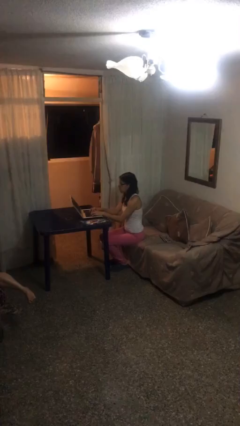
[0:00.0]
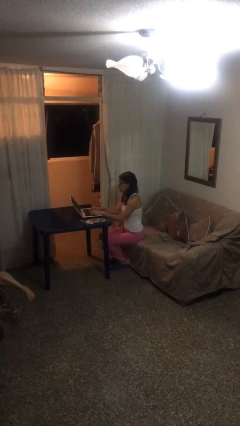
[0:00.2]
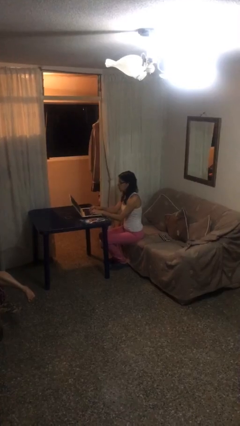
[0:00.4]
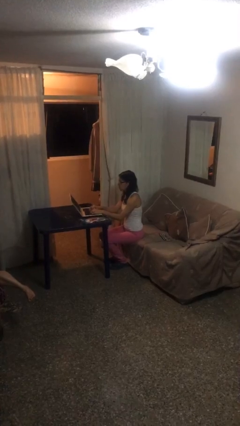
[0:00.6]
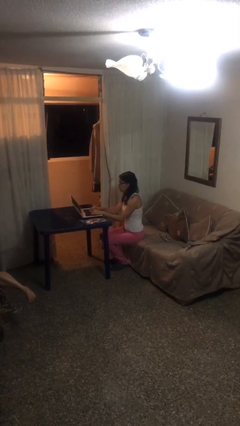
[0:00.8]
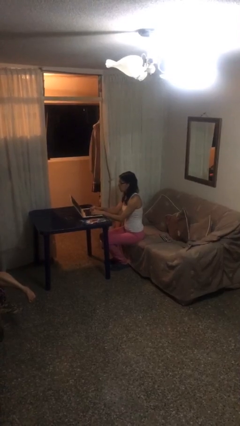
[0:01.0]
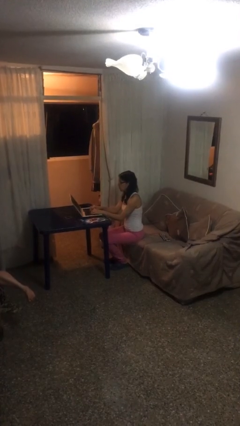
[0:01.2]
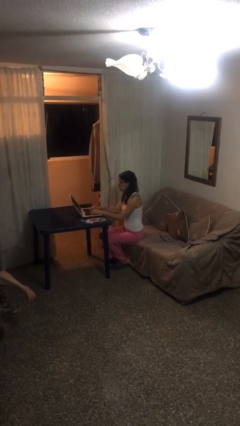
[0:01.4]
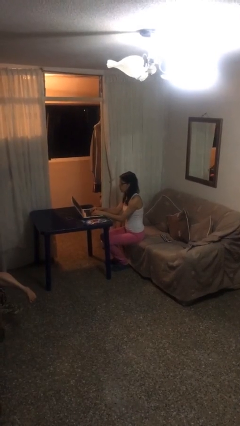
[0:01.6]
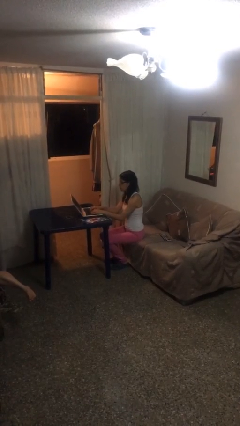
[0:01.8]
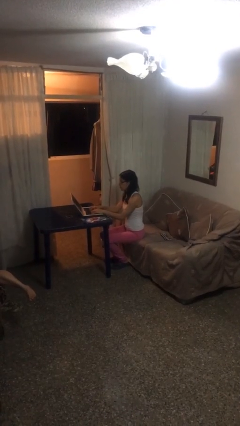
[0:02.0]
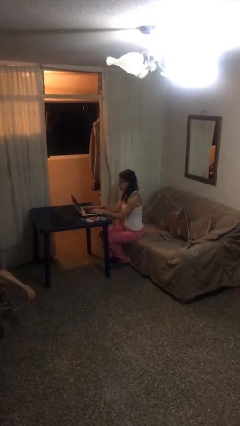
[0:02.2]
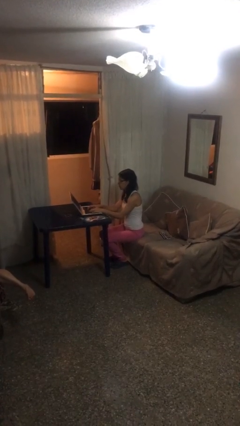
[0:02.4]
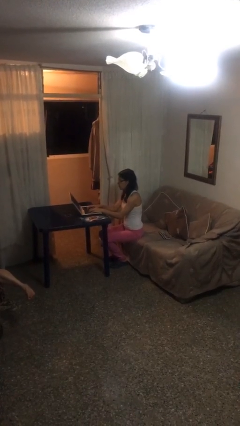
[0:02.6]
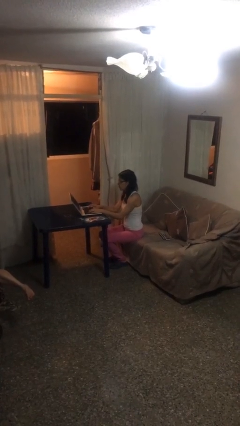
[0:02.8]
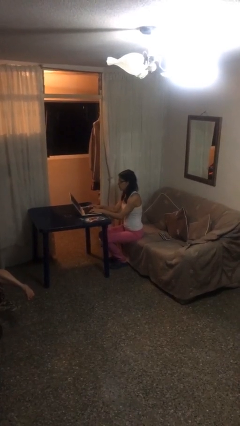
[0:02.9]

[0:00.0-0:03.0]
person interacts with laptop

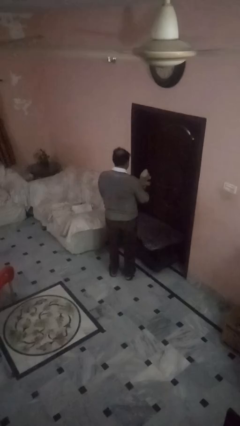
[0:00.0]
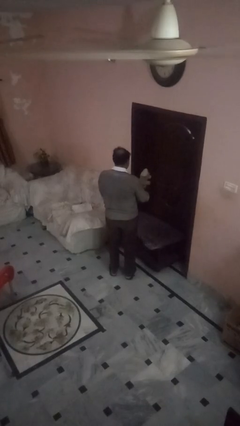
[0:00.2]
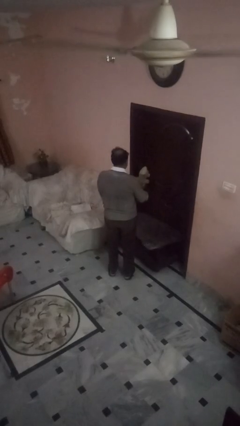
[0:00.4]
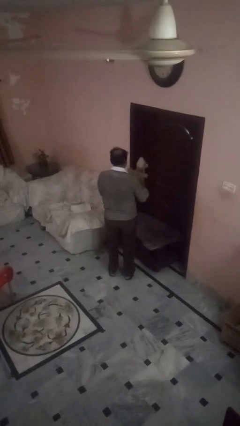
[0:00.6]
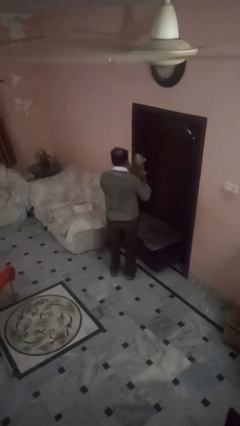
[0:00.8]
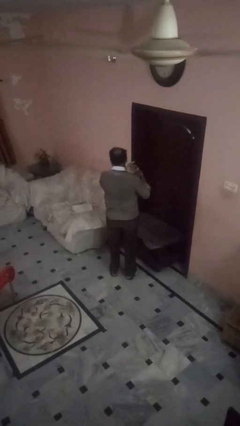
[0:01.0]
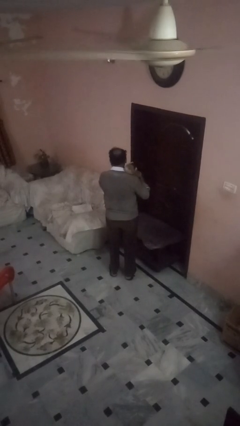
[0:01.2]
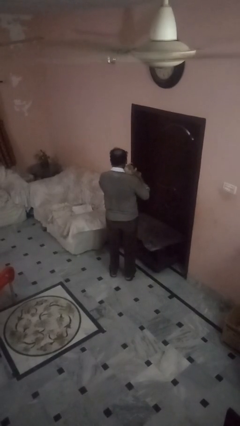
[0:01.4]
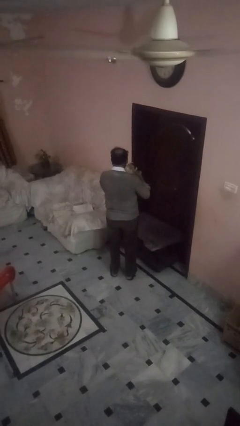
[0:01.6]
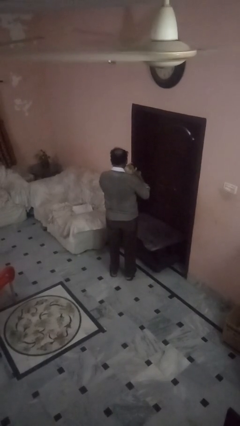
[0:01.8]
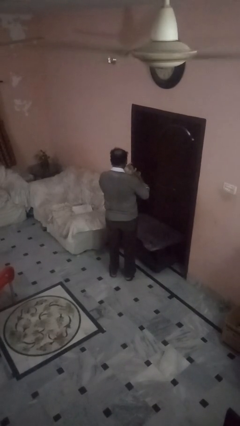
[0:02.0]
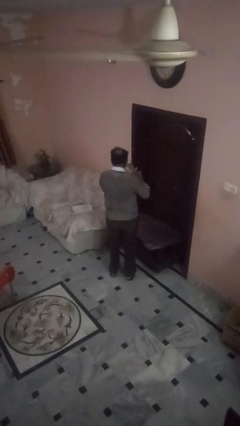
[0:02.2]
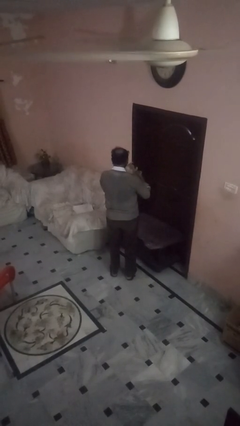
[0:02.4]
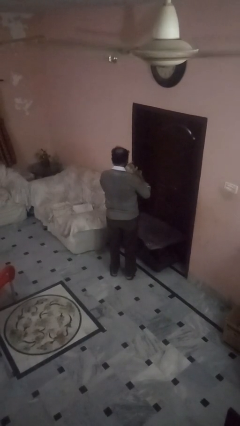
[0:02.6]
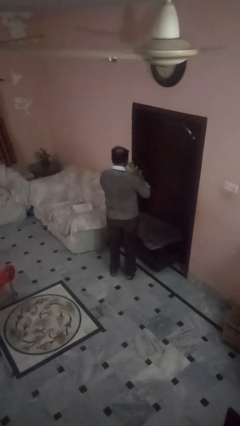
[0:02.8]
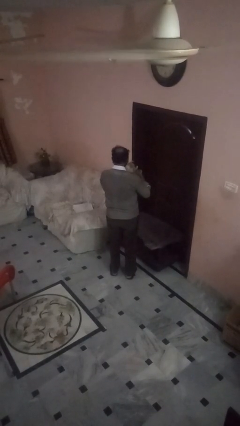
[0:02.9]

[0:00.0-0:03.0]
person hugs stuffed animal

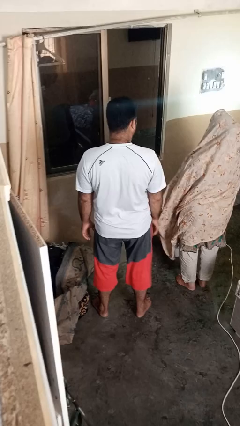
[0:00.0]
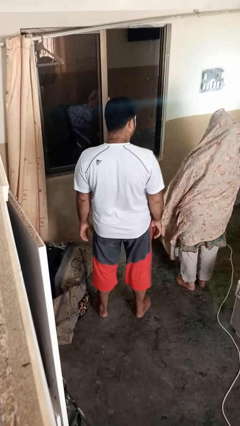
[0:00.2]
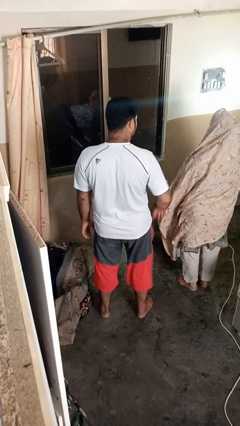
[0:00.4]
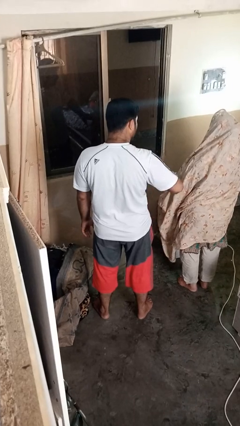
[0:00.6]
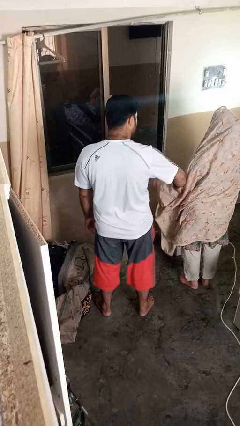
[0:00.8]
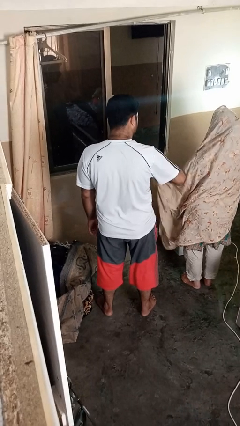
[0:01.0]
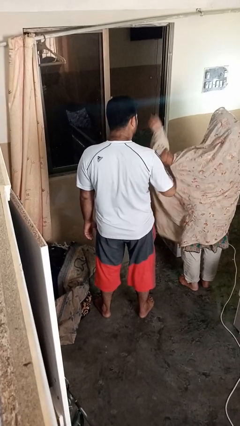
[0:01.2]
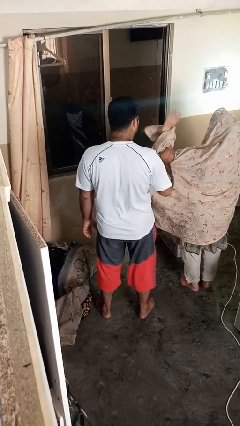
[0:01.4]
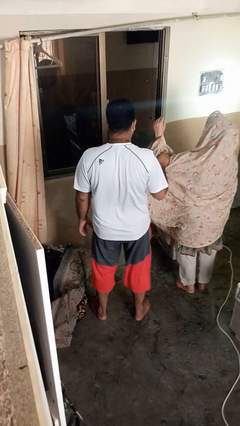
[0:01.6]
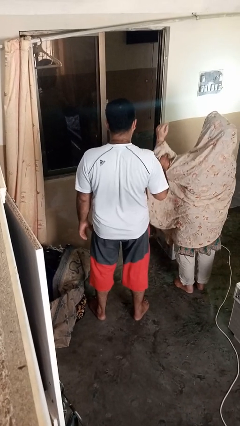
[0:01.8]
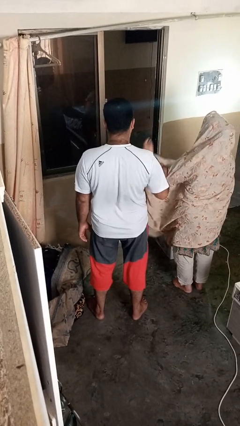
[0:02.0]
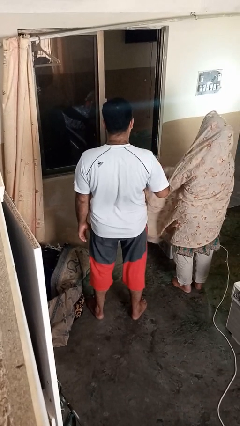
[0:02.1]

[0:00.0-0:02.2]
person grabs person by forearm

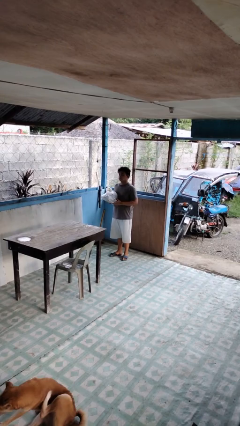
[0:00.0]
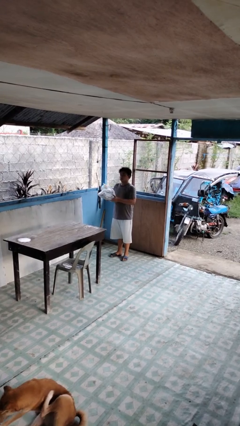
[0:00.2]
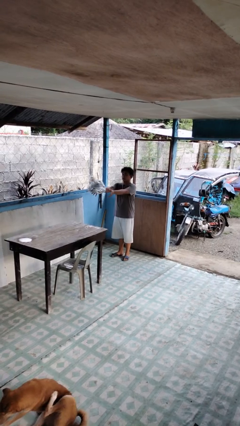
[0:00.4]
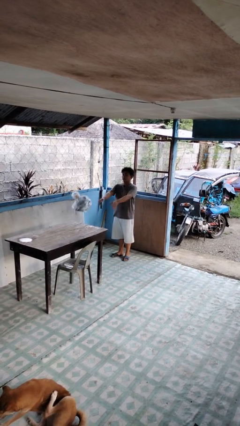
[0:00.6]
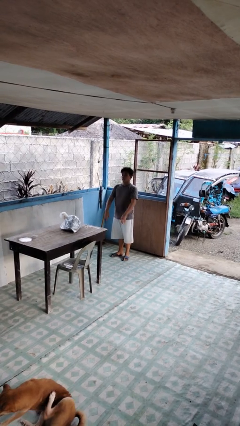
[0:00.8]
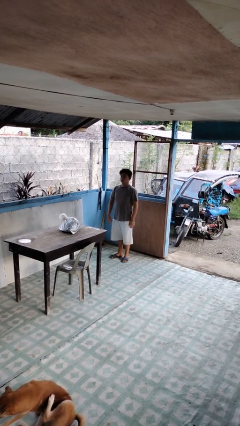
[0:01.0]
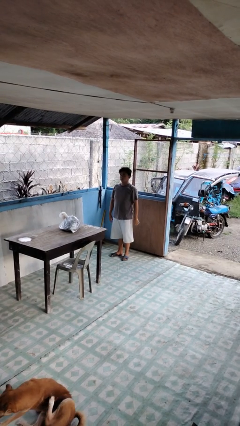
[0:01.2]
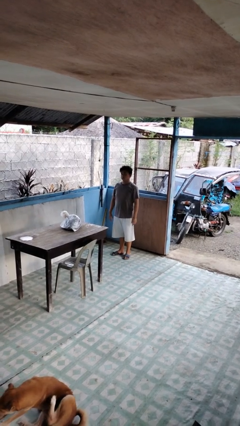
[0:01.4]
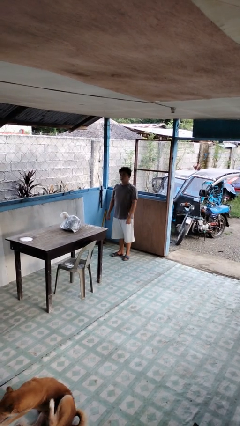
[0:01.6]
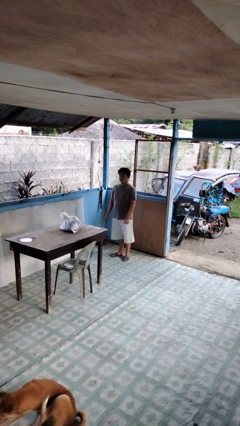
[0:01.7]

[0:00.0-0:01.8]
person throws object on table

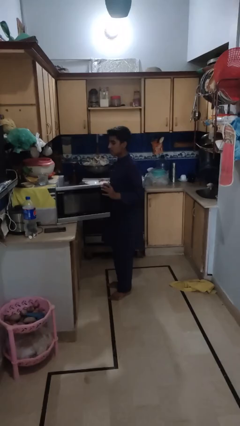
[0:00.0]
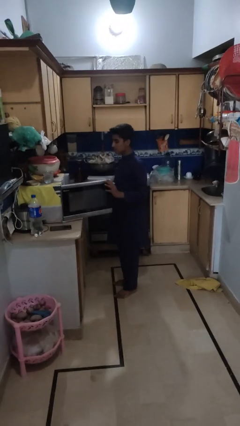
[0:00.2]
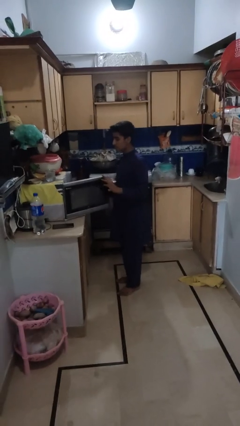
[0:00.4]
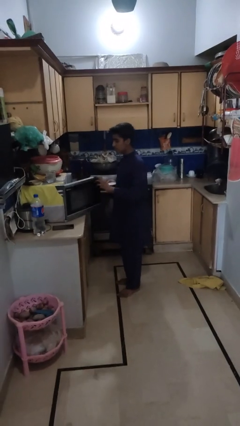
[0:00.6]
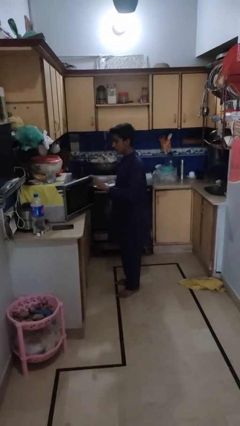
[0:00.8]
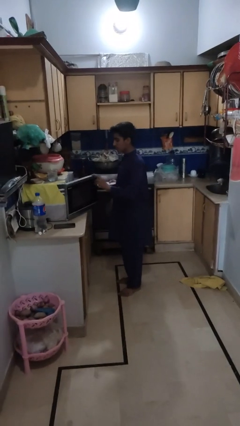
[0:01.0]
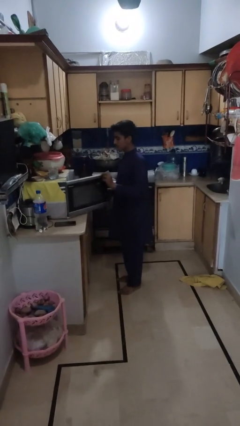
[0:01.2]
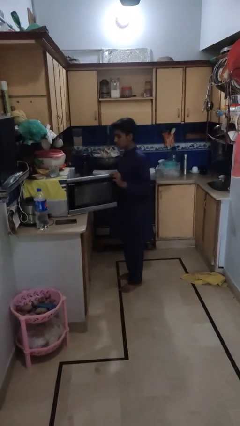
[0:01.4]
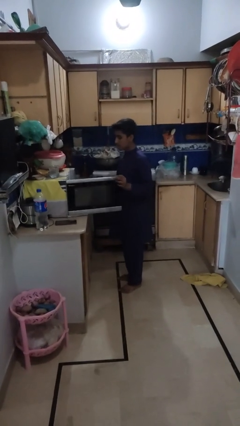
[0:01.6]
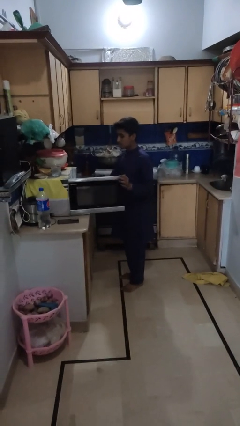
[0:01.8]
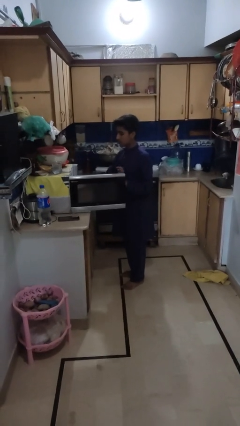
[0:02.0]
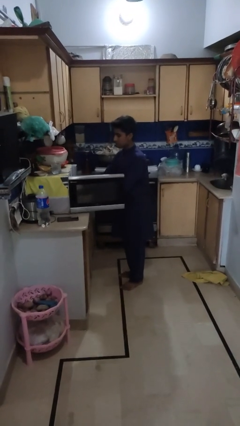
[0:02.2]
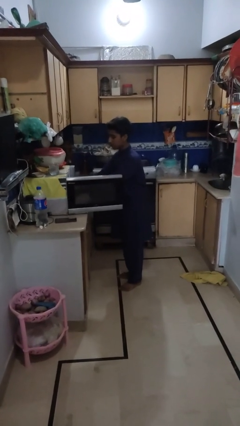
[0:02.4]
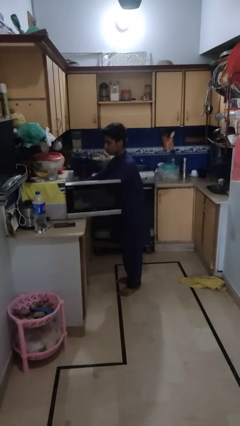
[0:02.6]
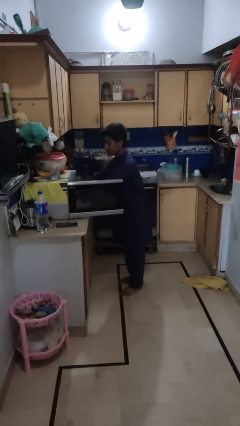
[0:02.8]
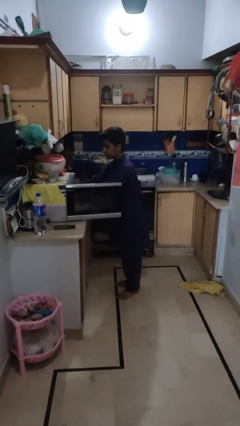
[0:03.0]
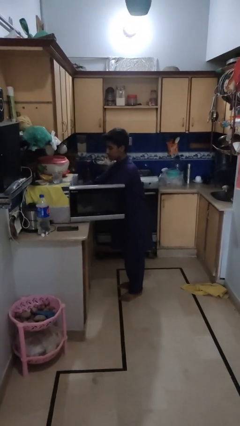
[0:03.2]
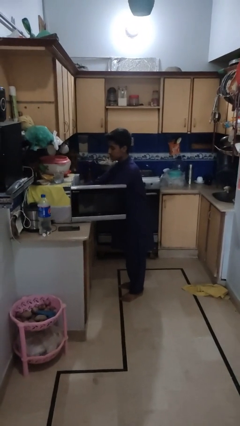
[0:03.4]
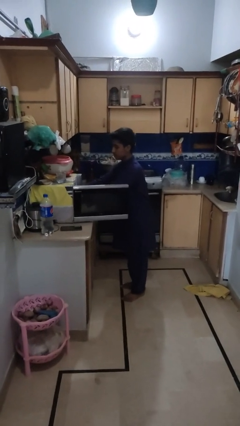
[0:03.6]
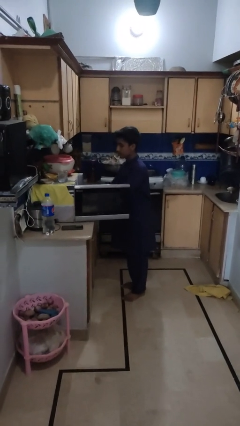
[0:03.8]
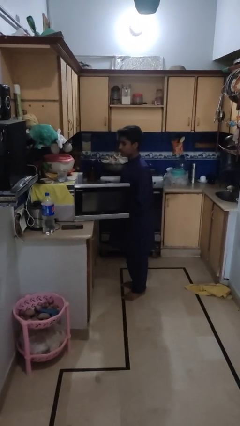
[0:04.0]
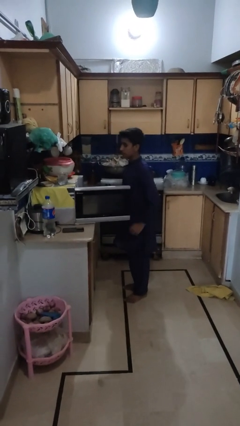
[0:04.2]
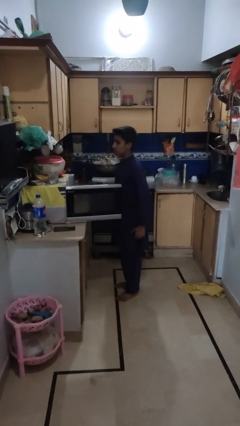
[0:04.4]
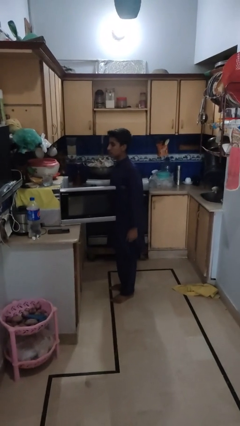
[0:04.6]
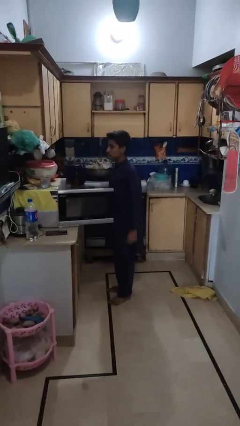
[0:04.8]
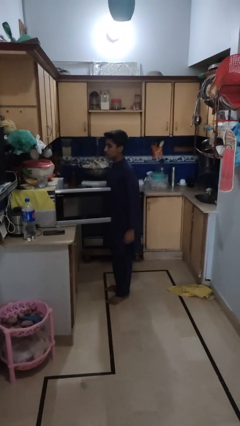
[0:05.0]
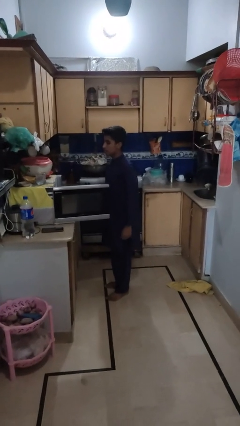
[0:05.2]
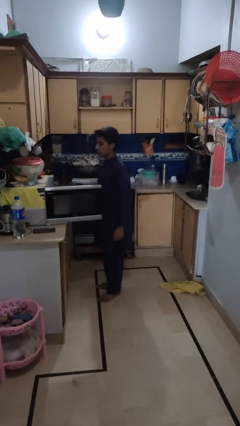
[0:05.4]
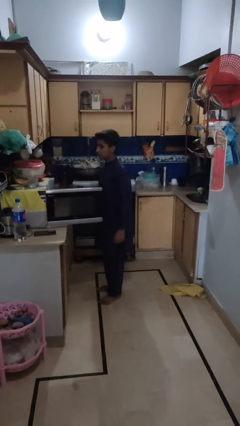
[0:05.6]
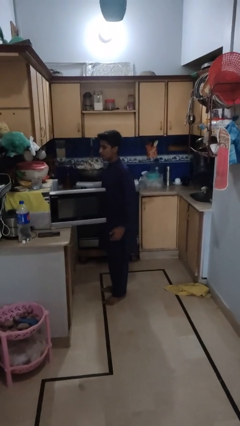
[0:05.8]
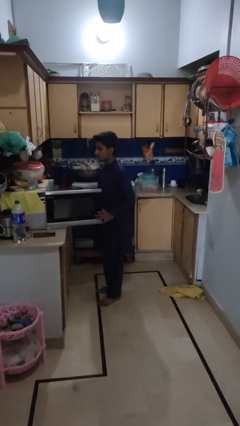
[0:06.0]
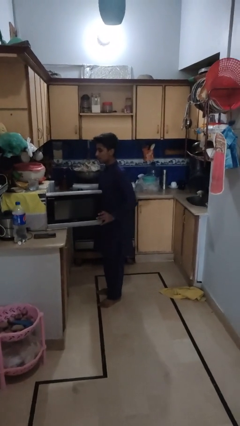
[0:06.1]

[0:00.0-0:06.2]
person puts object into microwave

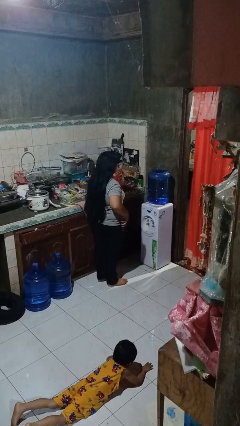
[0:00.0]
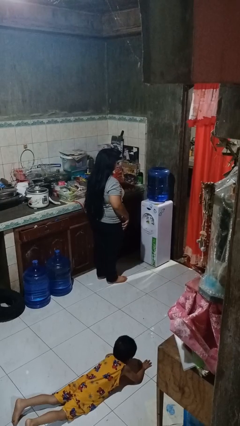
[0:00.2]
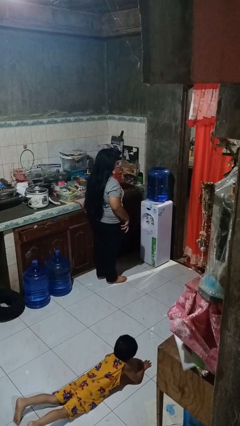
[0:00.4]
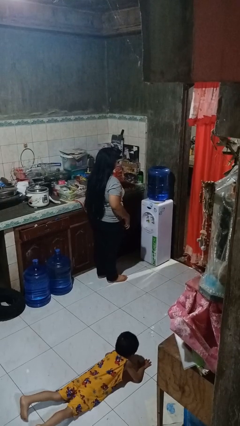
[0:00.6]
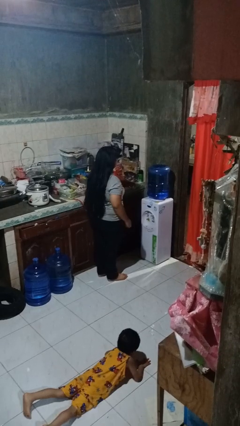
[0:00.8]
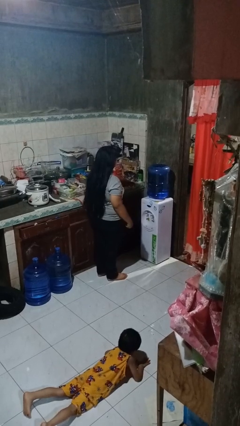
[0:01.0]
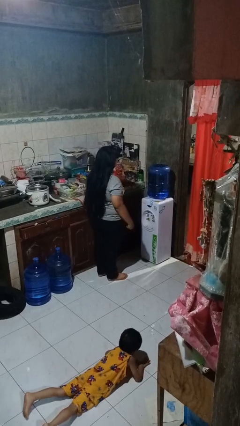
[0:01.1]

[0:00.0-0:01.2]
person puts phone into pocket
